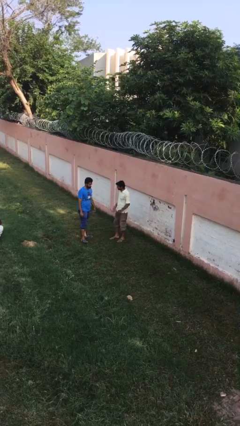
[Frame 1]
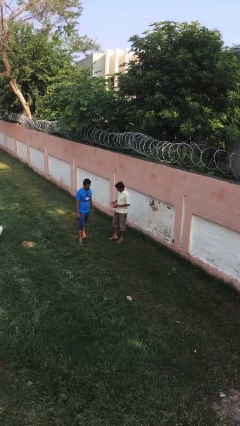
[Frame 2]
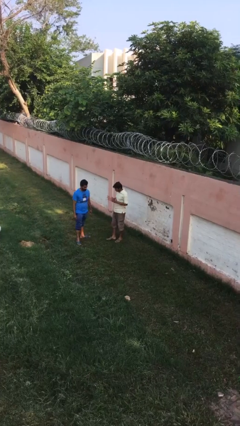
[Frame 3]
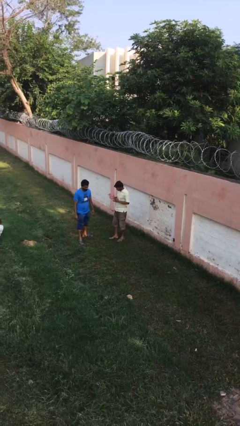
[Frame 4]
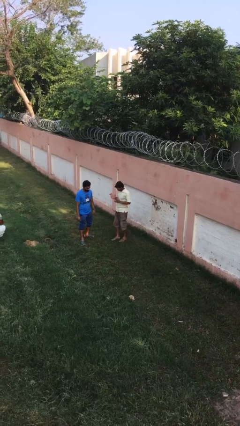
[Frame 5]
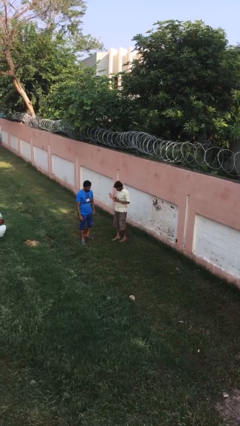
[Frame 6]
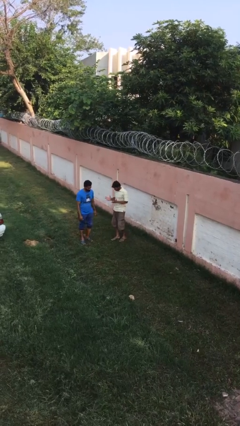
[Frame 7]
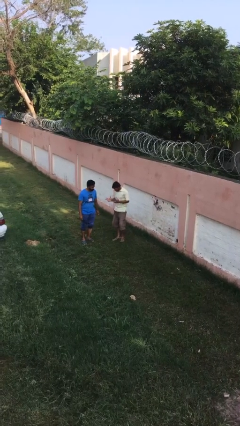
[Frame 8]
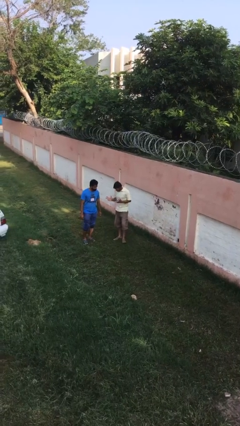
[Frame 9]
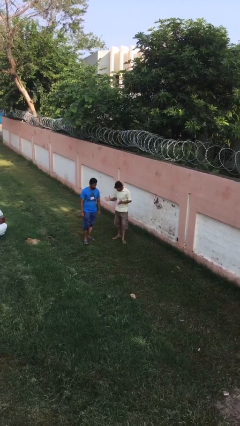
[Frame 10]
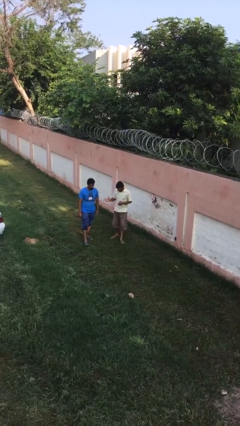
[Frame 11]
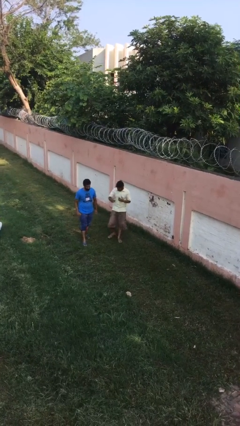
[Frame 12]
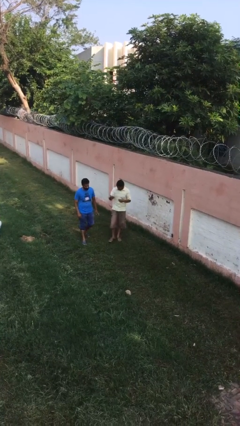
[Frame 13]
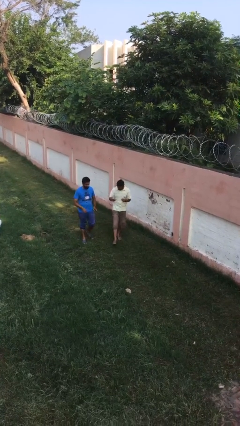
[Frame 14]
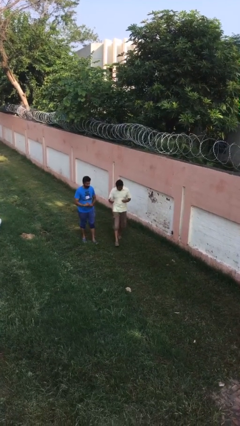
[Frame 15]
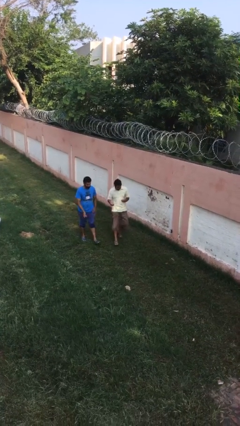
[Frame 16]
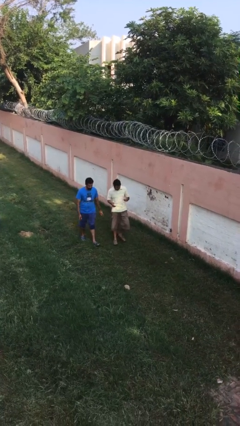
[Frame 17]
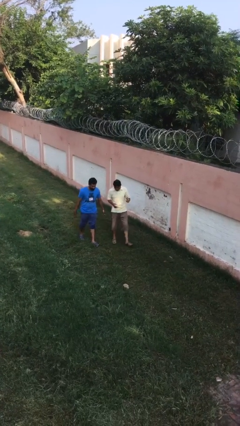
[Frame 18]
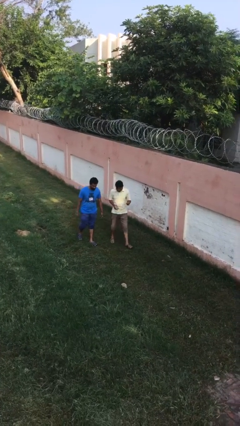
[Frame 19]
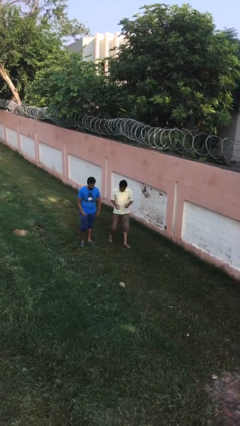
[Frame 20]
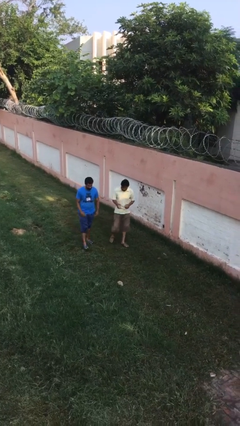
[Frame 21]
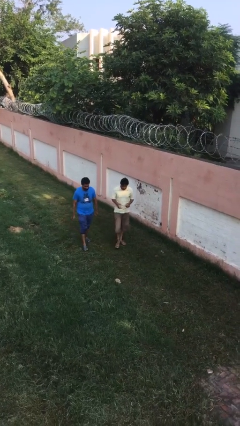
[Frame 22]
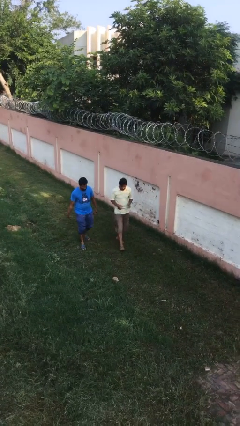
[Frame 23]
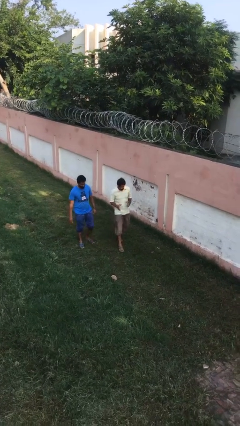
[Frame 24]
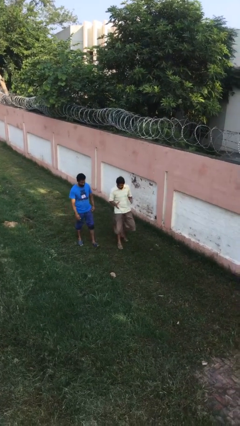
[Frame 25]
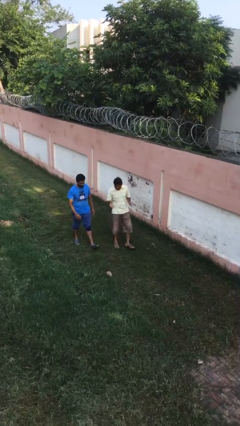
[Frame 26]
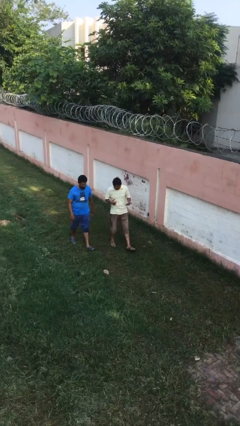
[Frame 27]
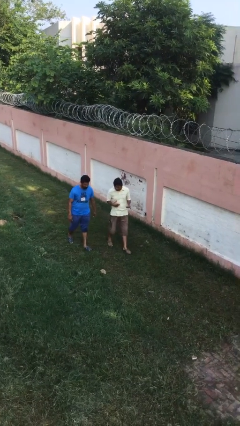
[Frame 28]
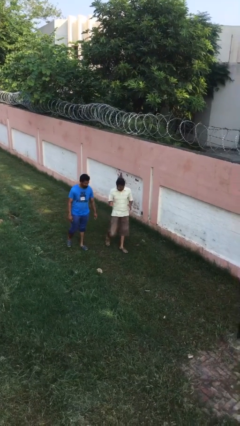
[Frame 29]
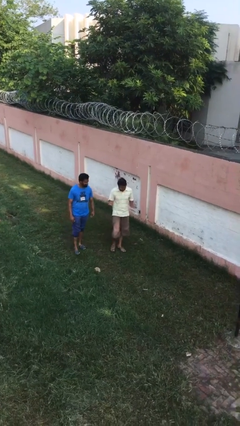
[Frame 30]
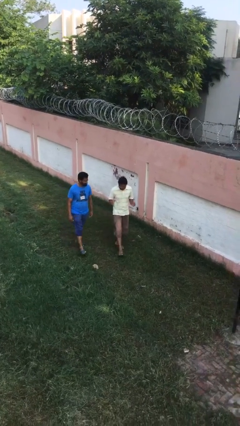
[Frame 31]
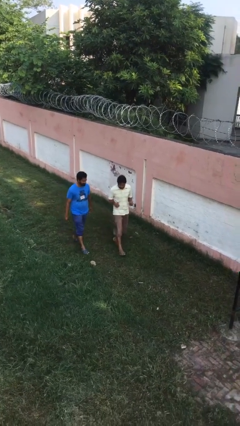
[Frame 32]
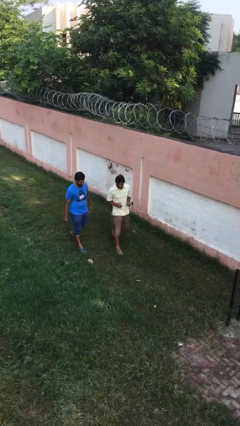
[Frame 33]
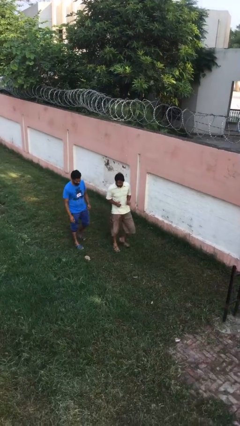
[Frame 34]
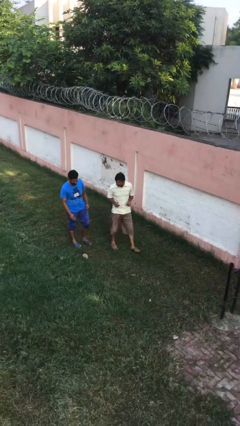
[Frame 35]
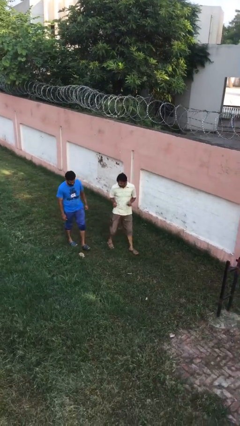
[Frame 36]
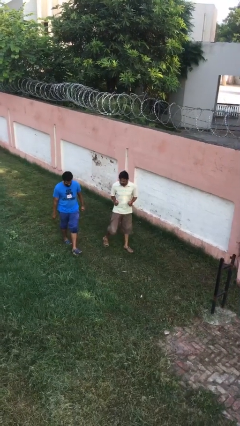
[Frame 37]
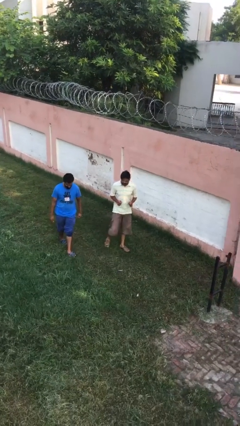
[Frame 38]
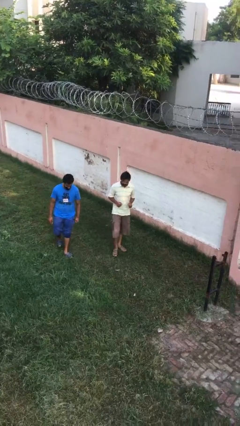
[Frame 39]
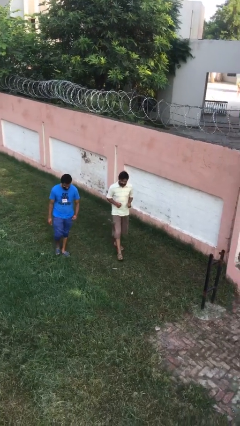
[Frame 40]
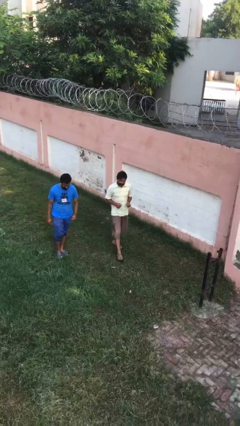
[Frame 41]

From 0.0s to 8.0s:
person talks to person

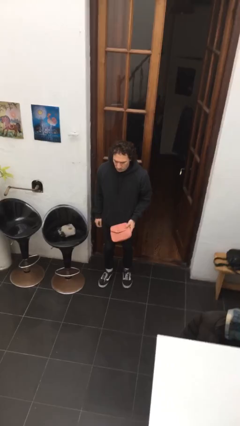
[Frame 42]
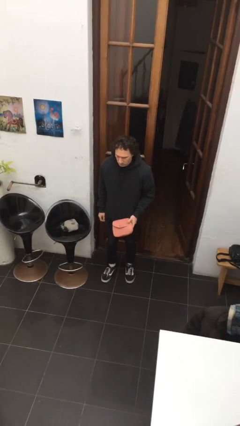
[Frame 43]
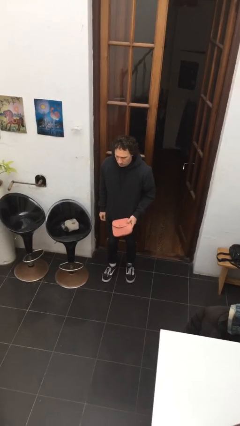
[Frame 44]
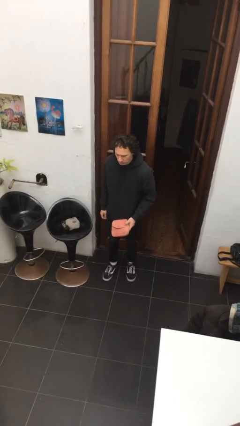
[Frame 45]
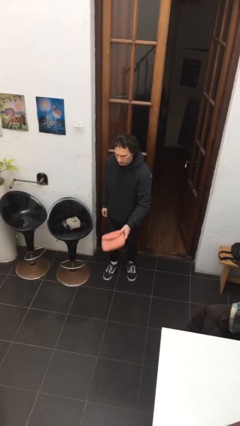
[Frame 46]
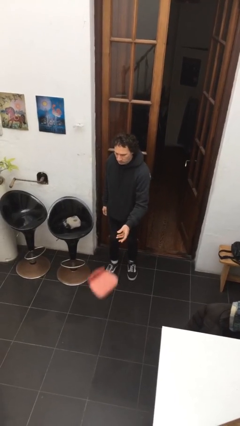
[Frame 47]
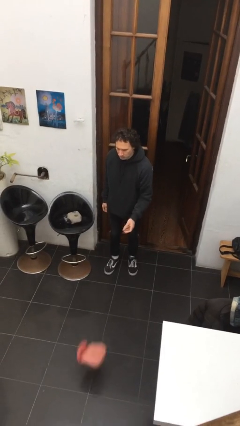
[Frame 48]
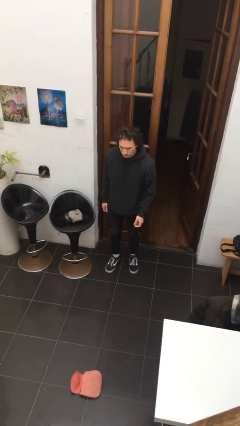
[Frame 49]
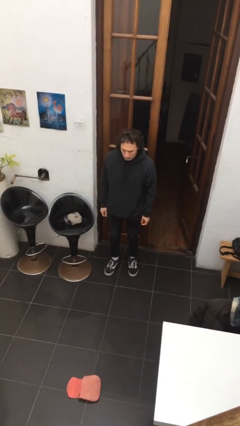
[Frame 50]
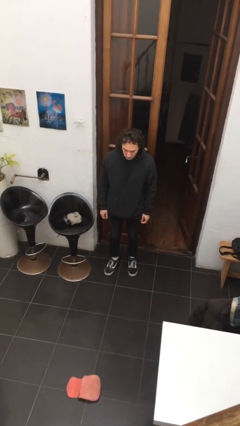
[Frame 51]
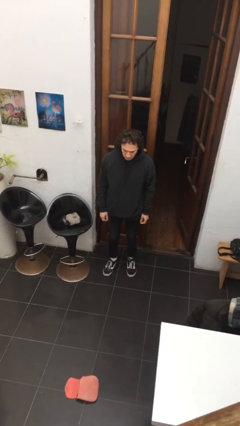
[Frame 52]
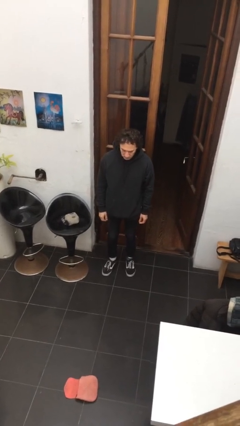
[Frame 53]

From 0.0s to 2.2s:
person throws object to ground

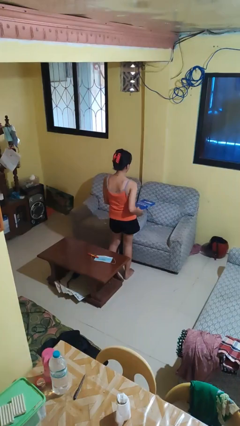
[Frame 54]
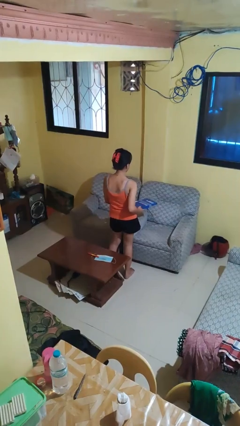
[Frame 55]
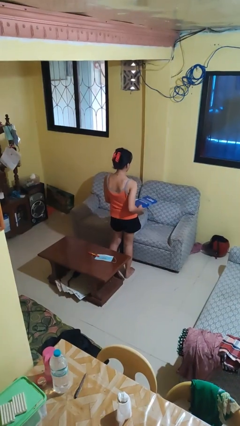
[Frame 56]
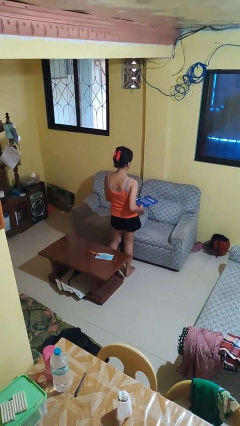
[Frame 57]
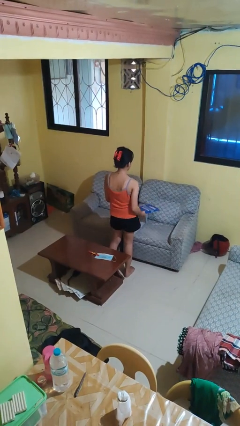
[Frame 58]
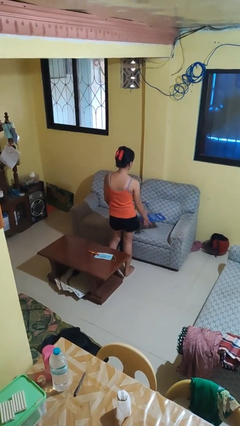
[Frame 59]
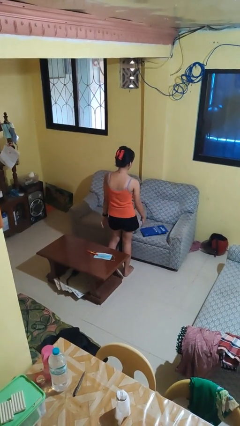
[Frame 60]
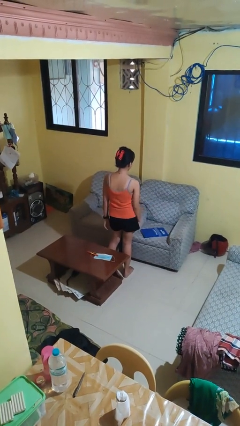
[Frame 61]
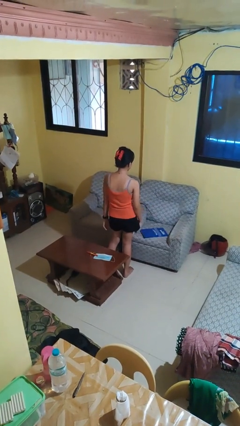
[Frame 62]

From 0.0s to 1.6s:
person puts down object on couch

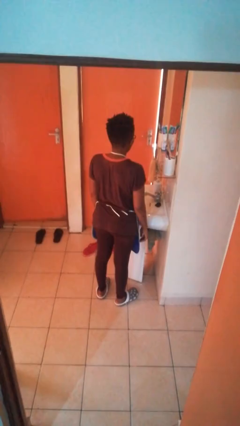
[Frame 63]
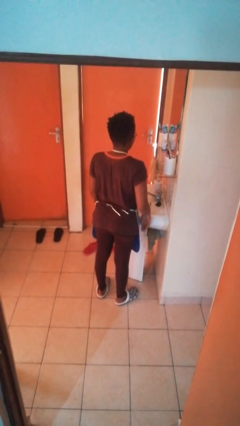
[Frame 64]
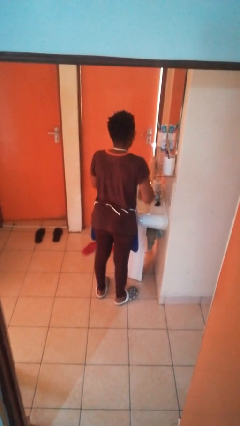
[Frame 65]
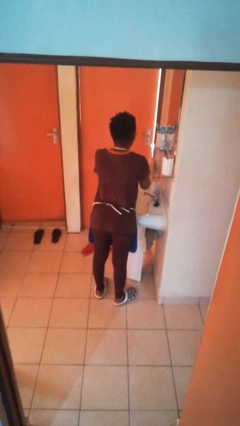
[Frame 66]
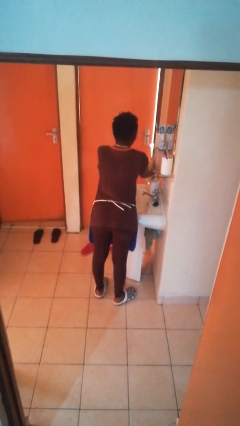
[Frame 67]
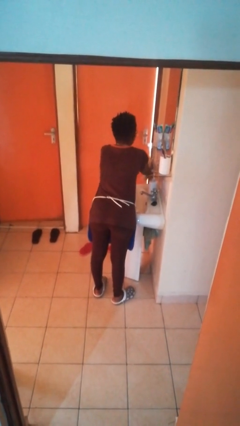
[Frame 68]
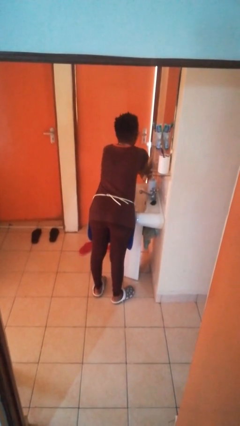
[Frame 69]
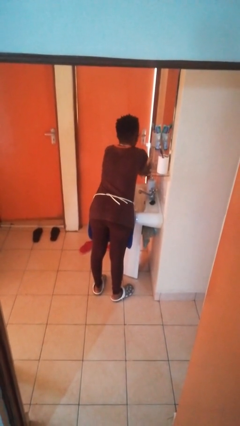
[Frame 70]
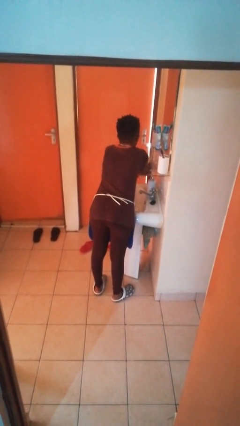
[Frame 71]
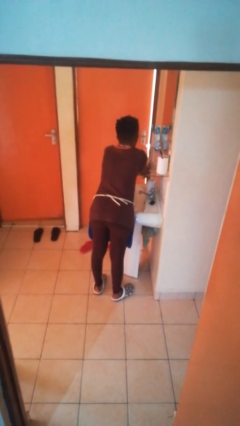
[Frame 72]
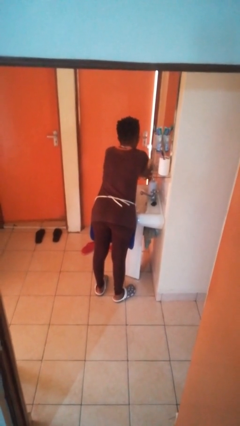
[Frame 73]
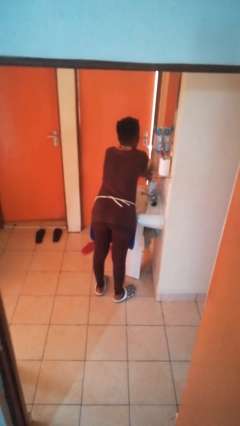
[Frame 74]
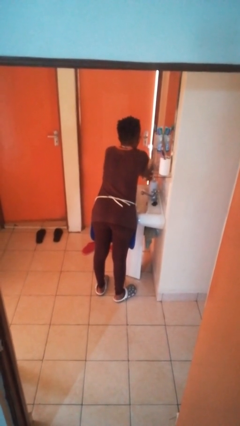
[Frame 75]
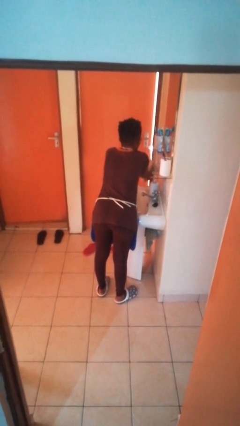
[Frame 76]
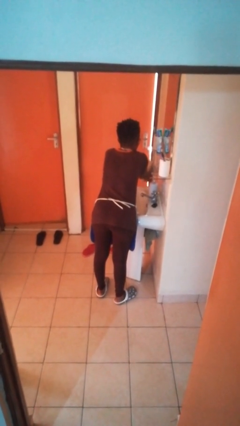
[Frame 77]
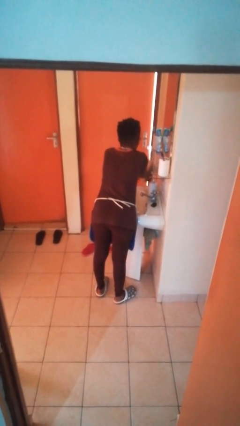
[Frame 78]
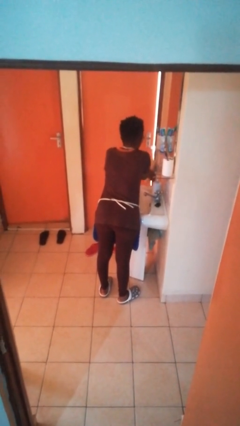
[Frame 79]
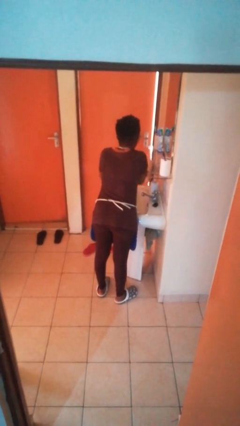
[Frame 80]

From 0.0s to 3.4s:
person dries hands with towel

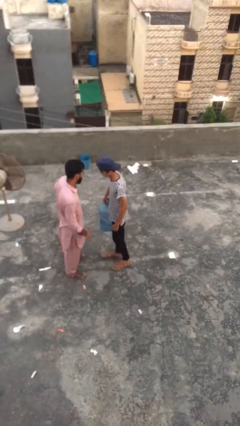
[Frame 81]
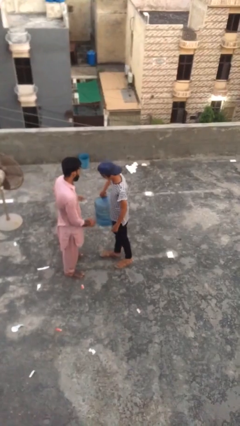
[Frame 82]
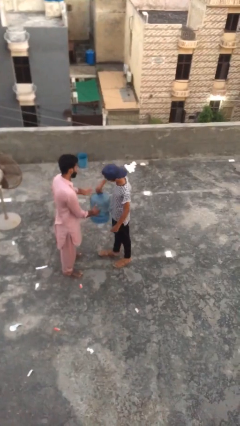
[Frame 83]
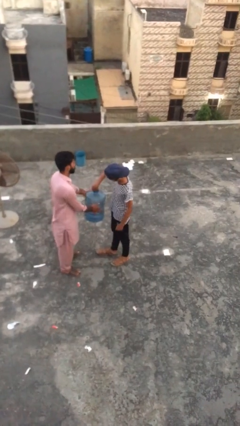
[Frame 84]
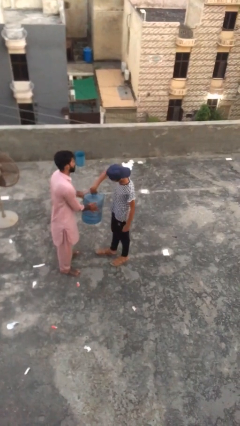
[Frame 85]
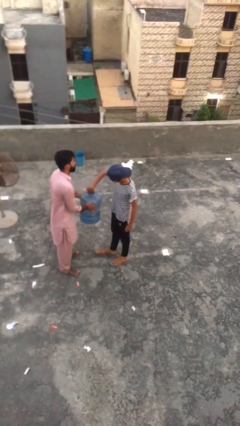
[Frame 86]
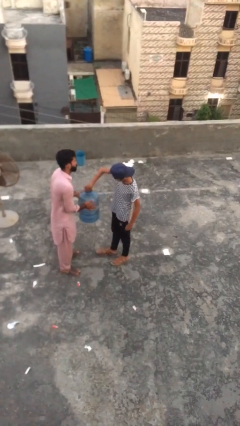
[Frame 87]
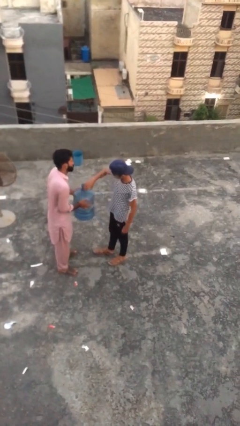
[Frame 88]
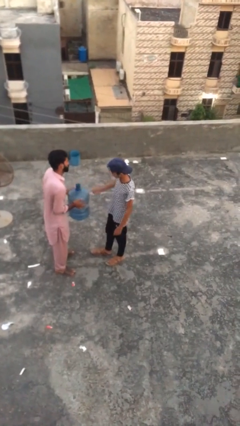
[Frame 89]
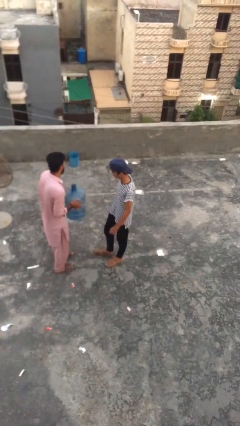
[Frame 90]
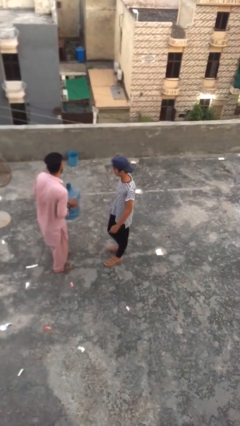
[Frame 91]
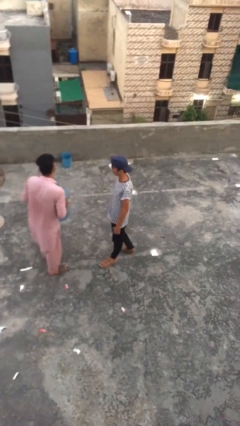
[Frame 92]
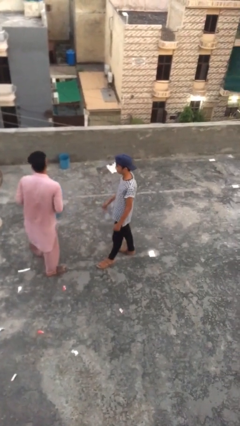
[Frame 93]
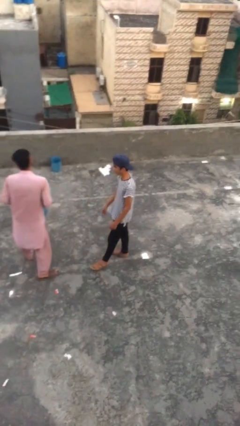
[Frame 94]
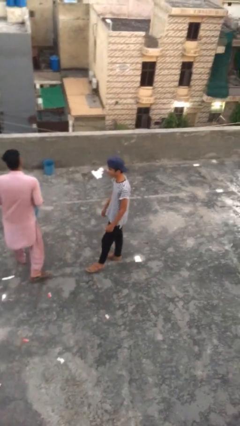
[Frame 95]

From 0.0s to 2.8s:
person transfers object to person
